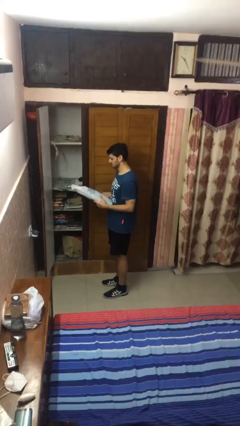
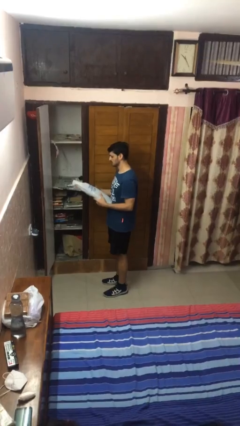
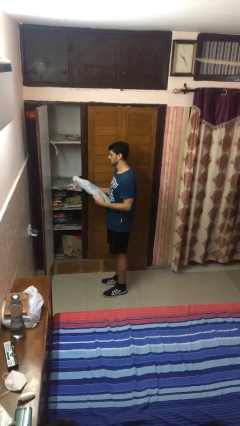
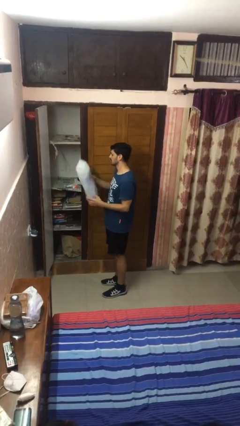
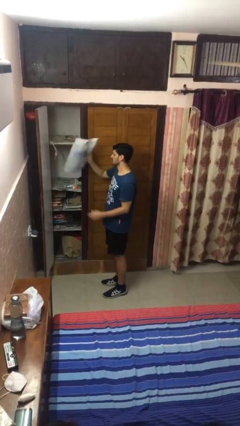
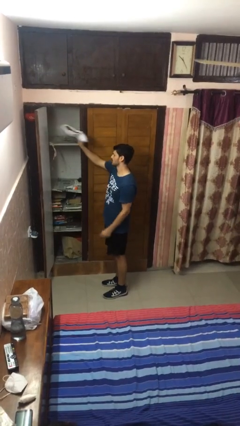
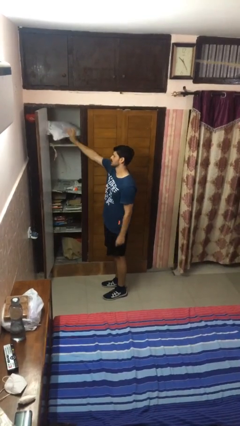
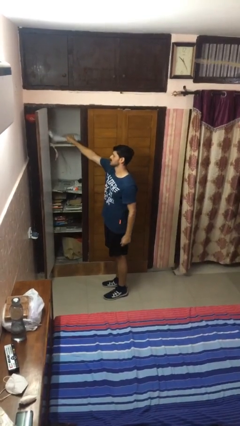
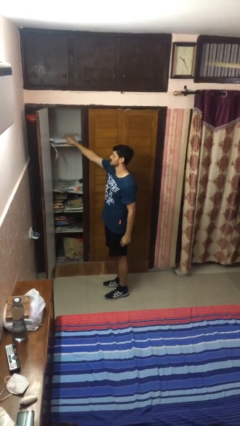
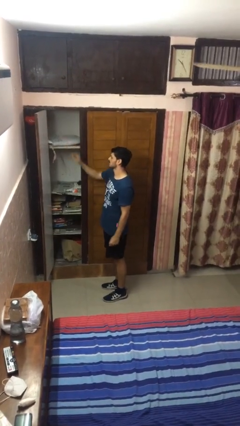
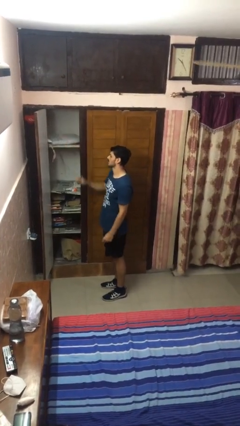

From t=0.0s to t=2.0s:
person puts down object on shelf

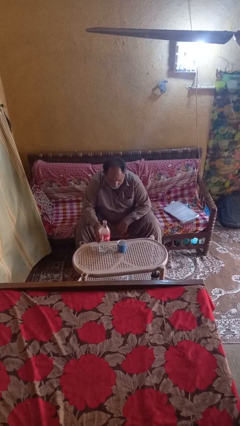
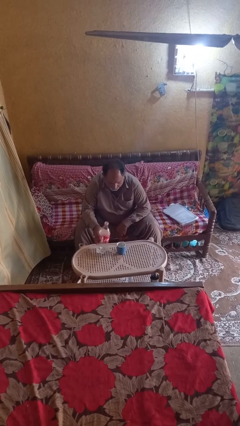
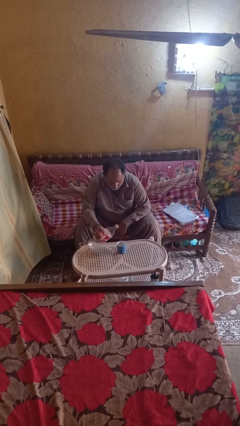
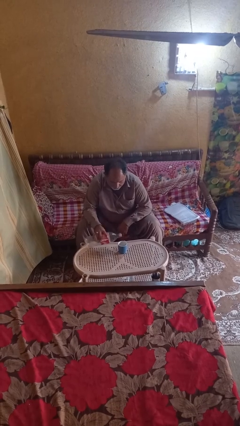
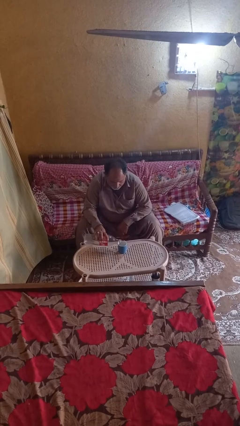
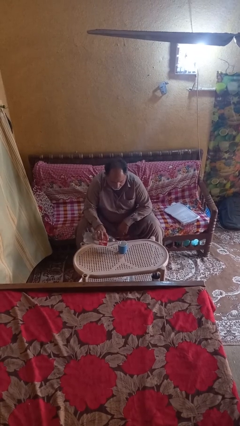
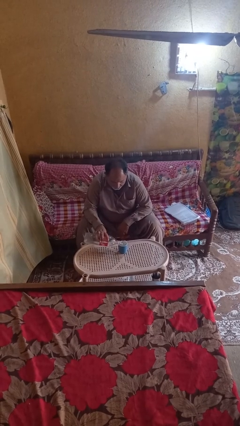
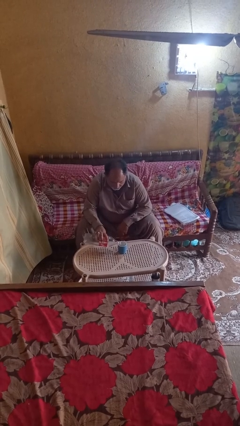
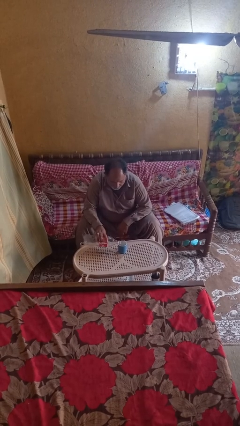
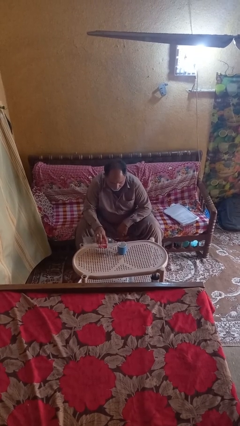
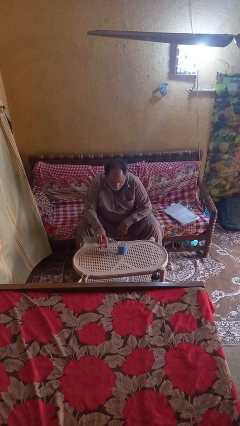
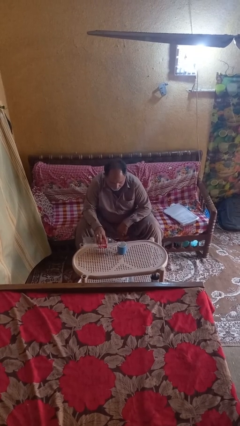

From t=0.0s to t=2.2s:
person pours liquid into cup

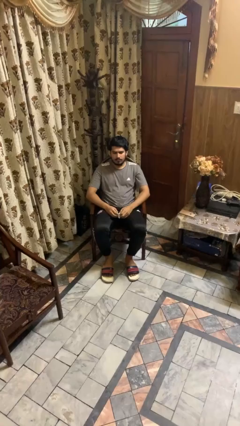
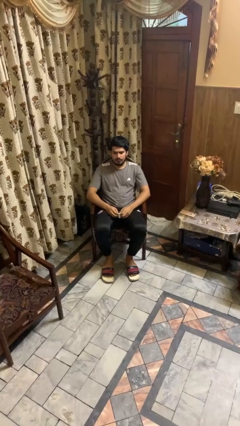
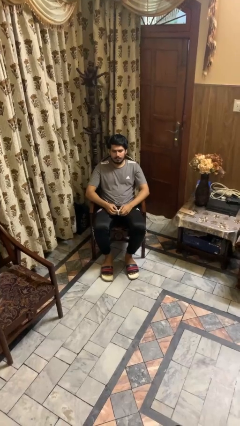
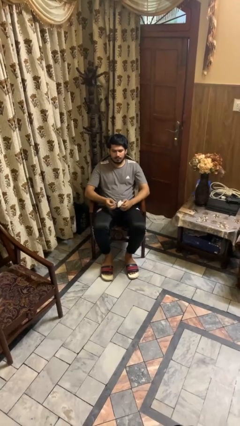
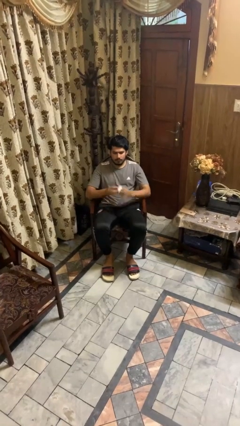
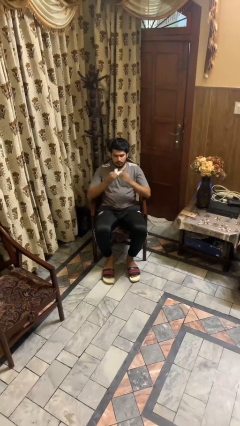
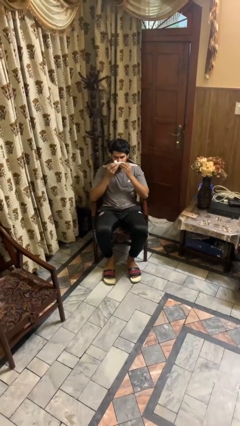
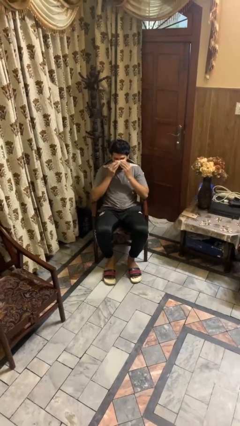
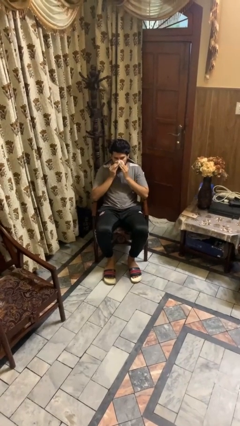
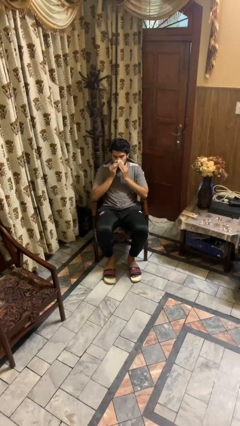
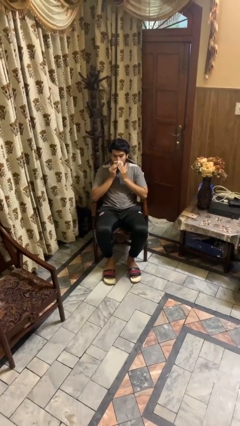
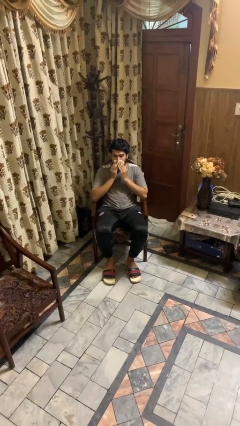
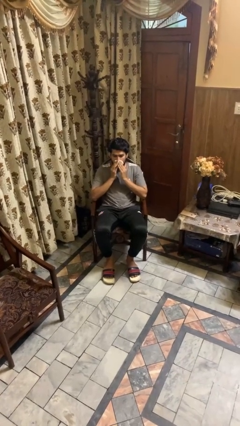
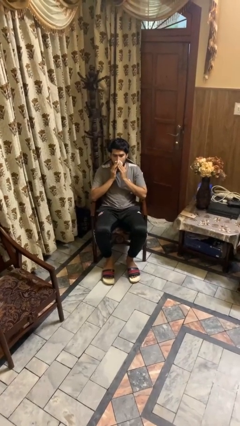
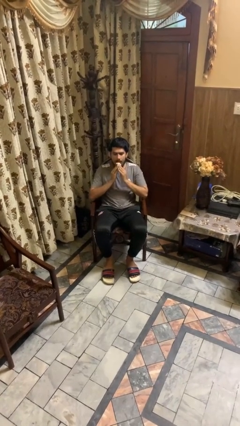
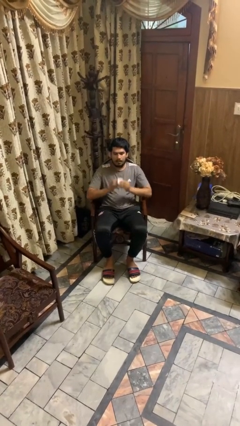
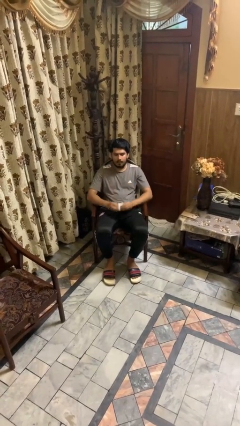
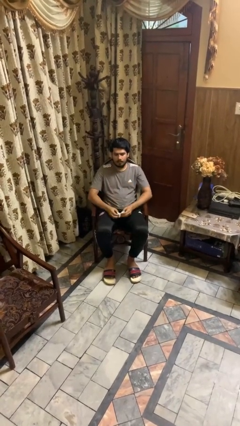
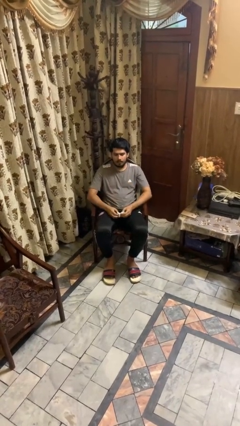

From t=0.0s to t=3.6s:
person blows nose

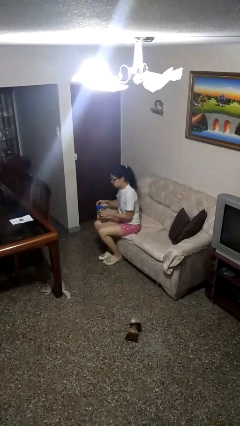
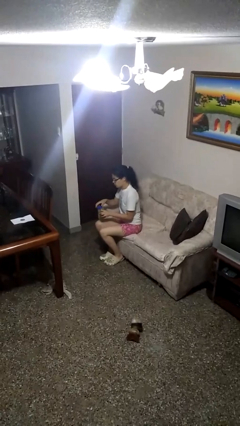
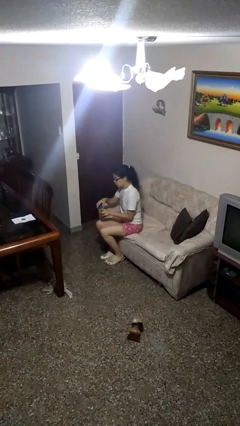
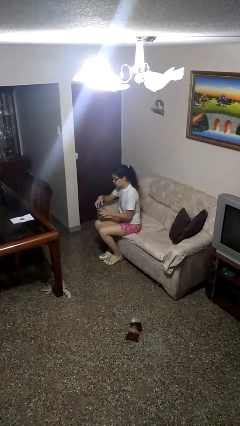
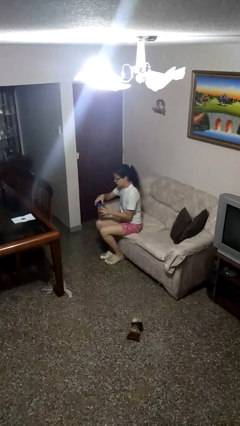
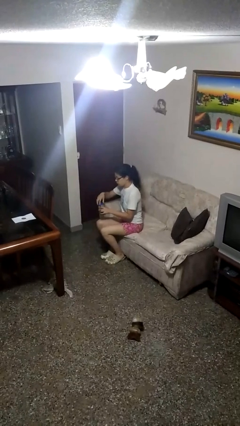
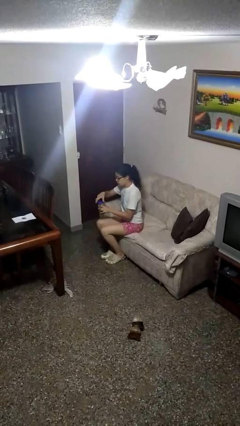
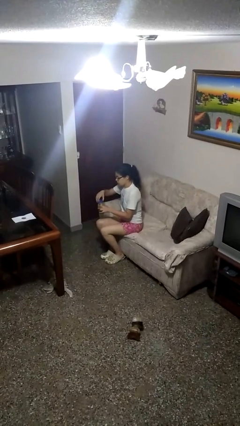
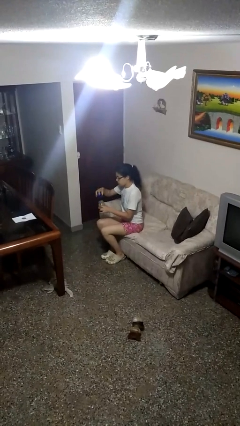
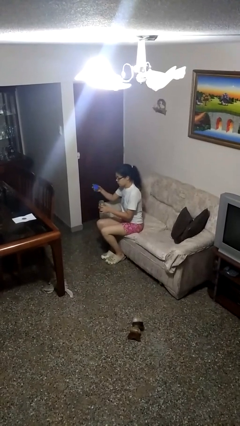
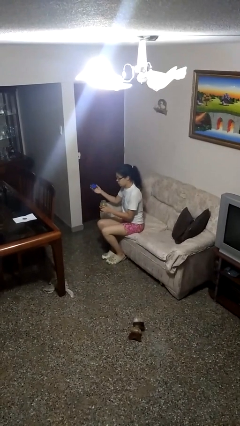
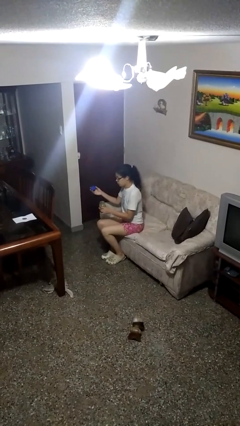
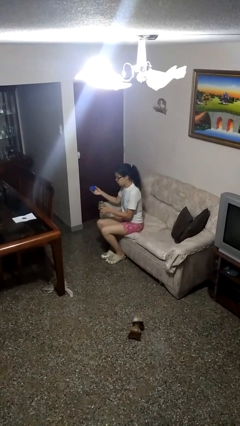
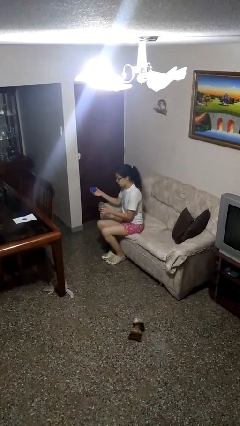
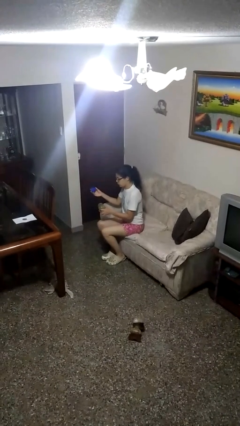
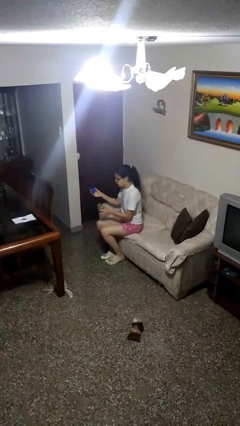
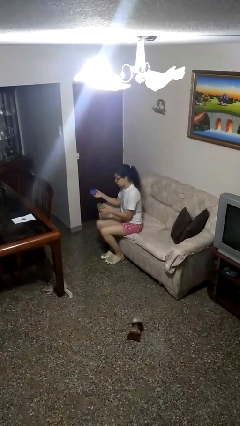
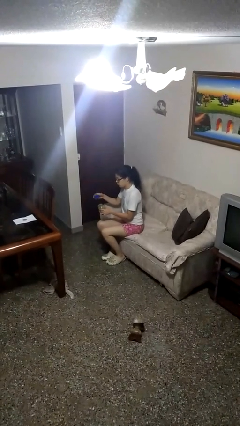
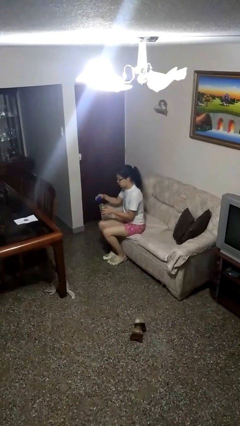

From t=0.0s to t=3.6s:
person opens jar

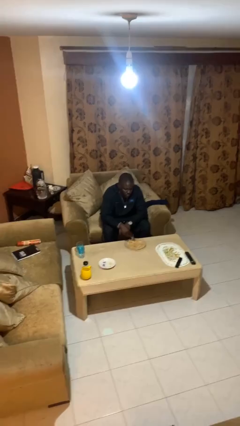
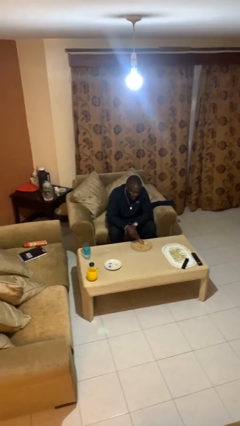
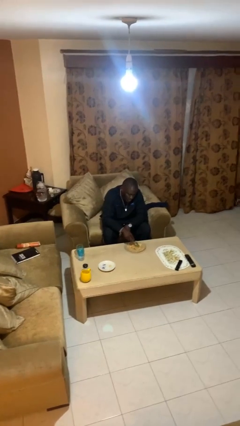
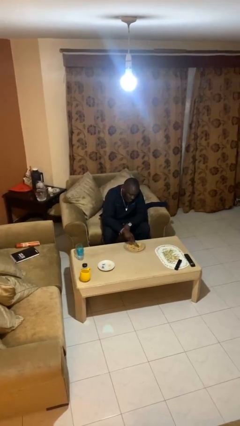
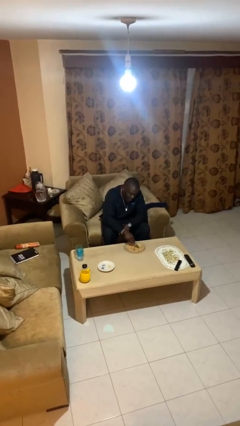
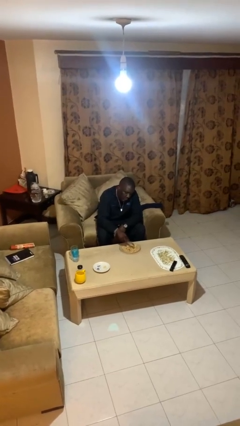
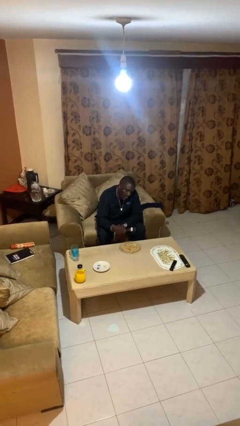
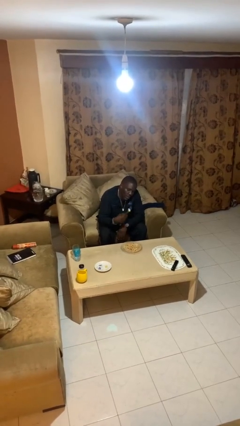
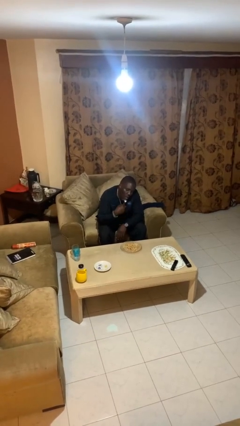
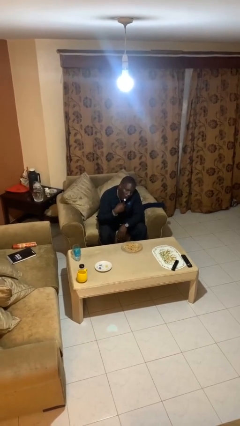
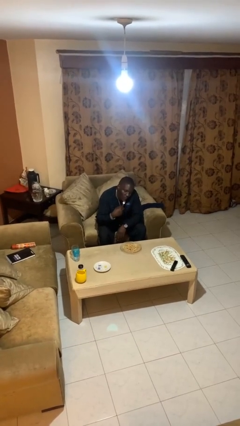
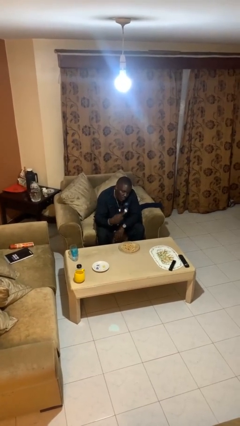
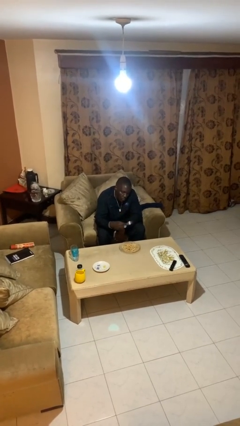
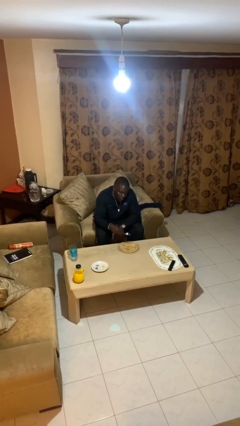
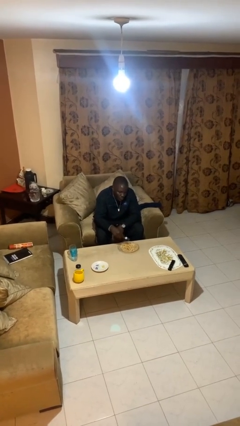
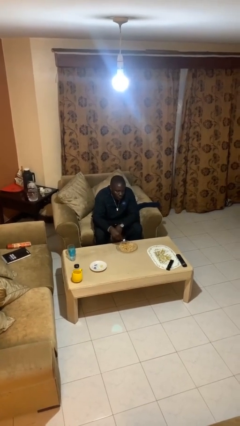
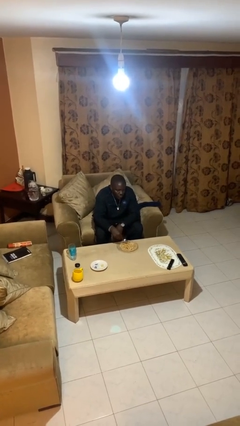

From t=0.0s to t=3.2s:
person eats with utensil

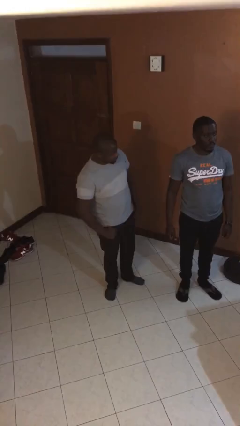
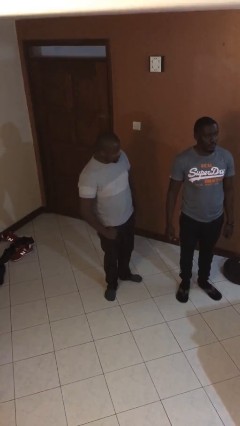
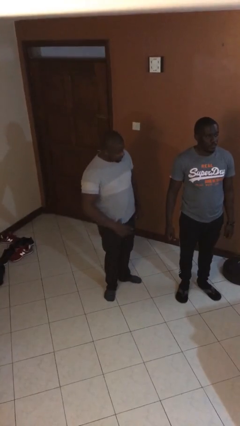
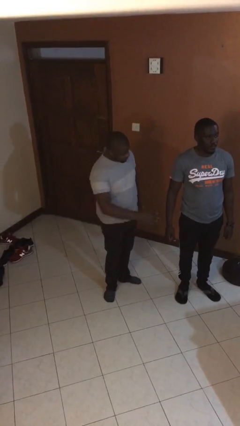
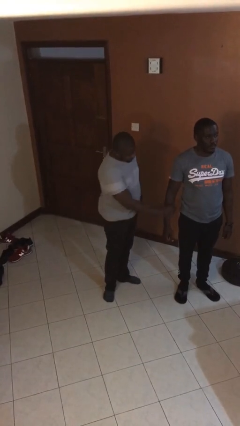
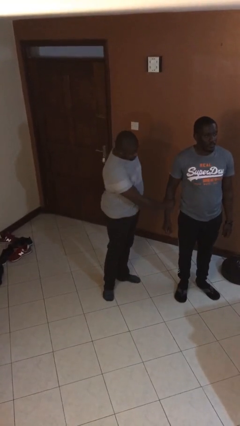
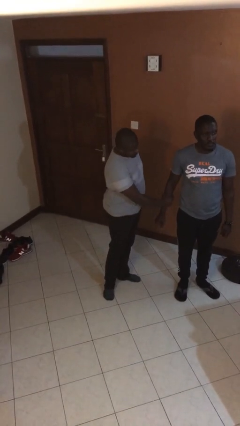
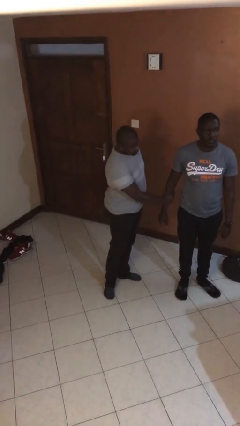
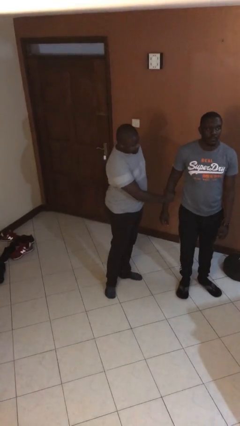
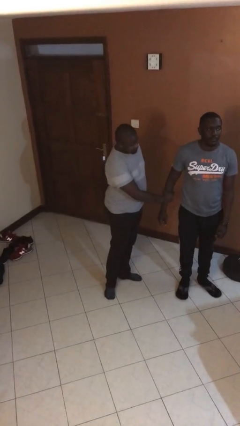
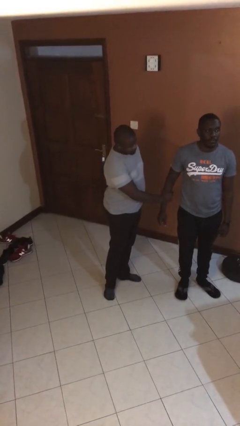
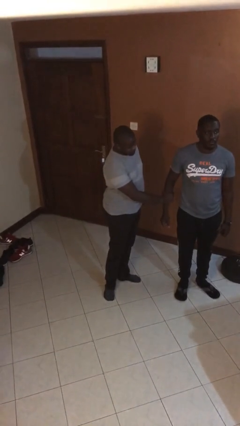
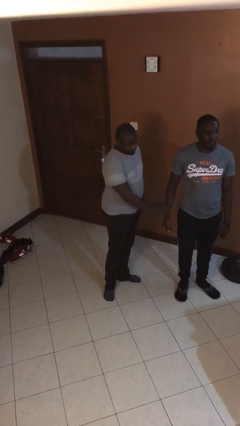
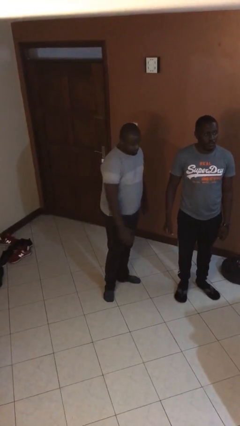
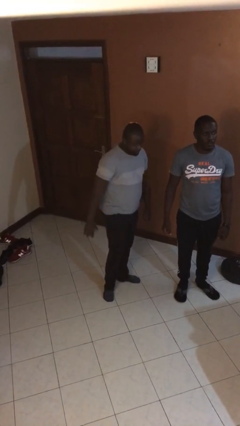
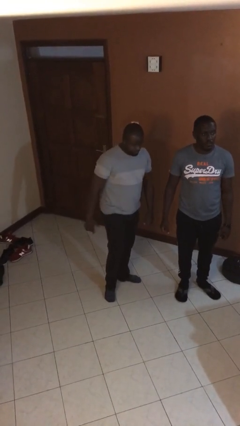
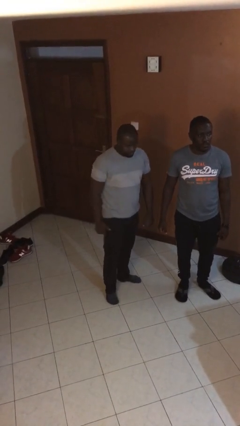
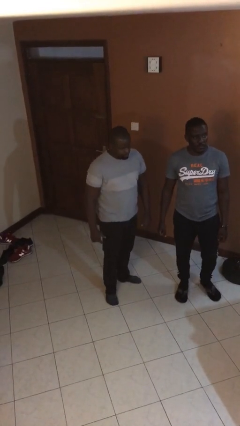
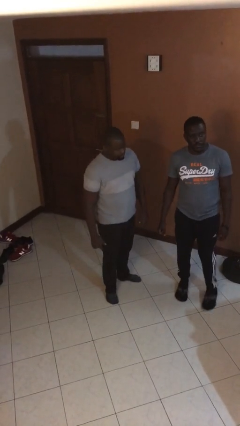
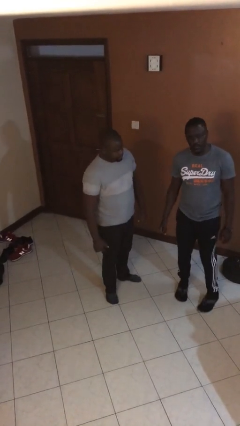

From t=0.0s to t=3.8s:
person grabs person by forearm
